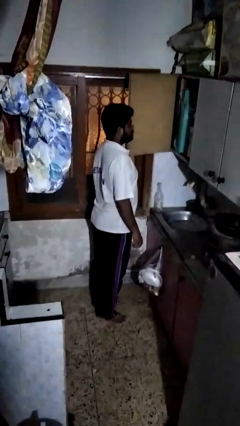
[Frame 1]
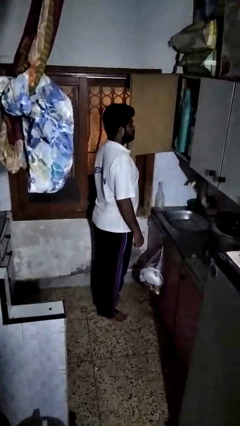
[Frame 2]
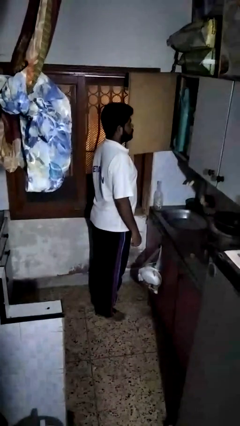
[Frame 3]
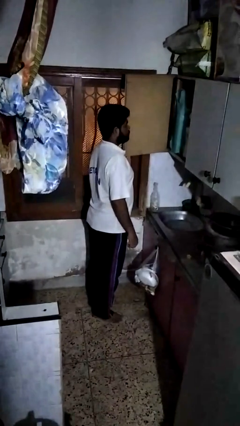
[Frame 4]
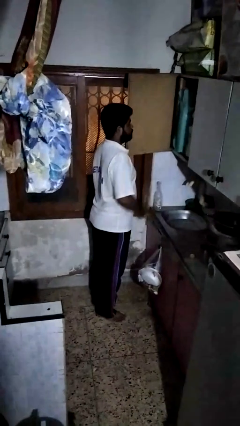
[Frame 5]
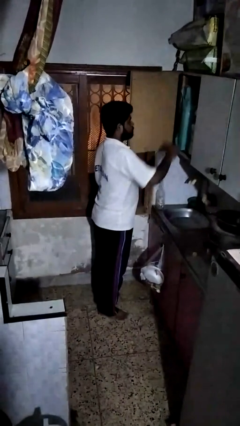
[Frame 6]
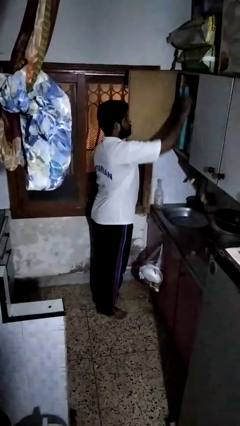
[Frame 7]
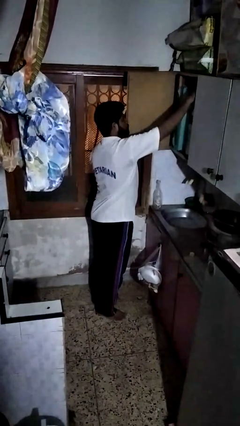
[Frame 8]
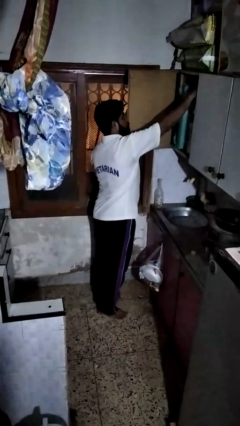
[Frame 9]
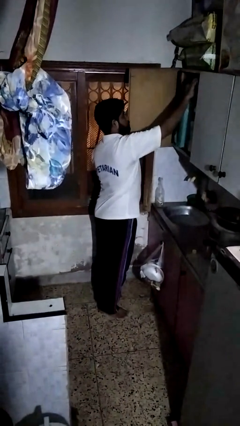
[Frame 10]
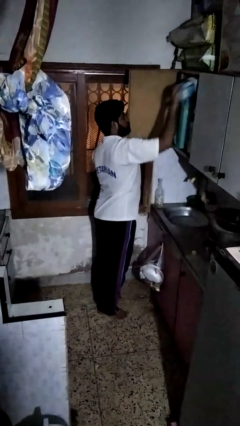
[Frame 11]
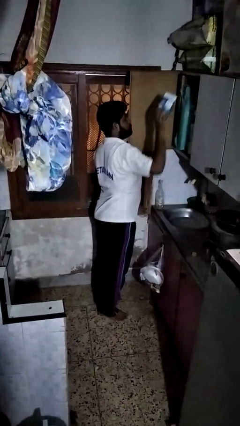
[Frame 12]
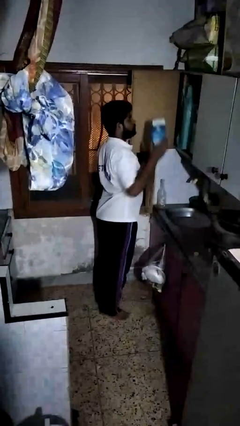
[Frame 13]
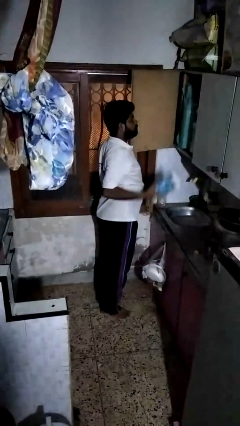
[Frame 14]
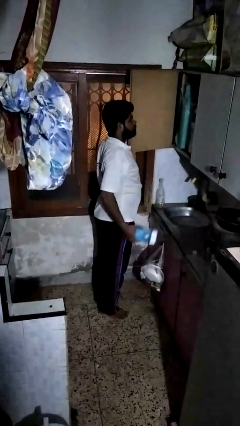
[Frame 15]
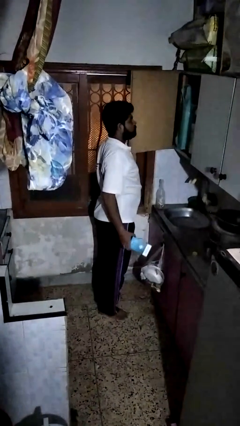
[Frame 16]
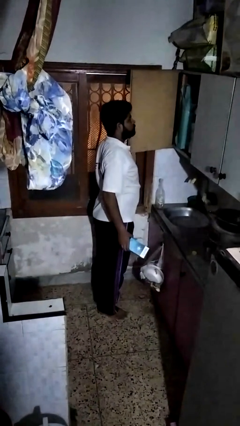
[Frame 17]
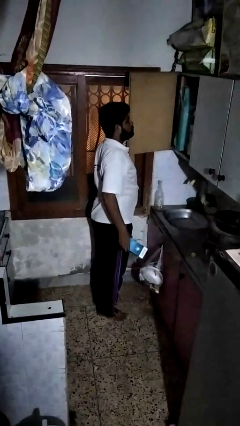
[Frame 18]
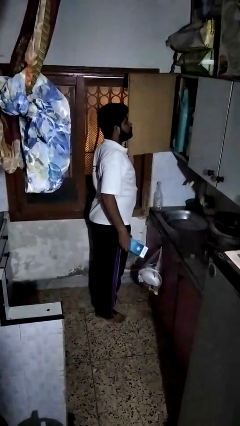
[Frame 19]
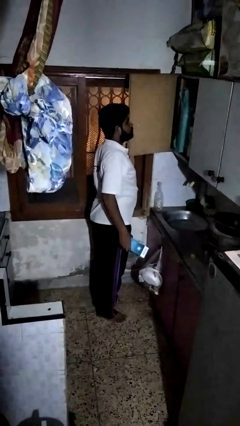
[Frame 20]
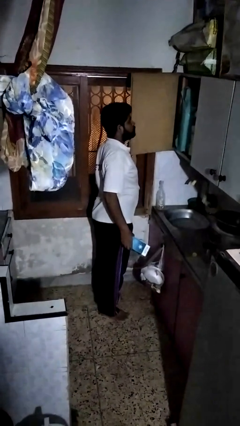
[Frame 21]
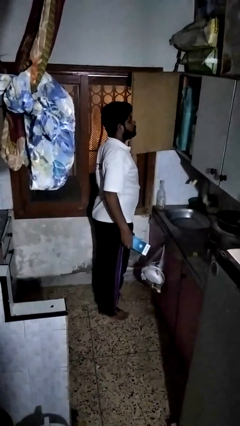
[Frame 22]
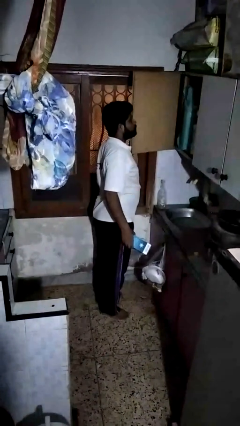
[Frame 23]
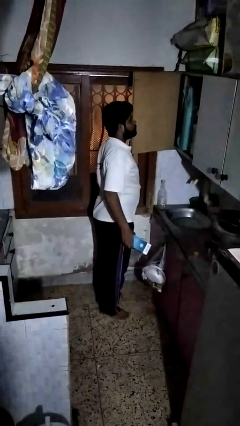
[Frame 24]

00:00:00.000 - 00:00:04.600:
person picks up object from cabinet

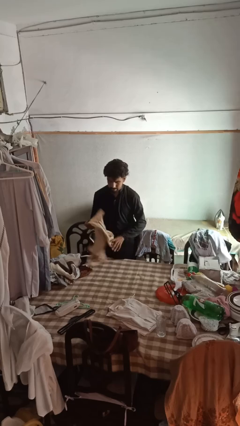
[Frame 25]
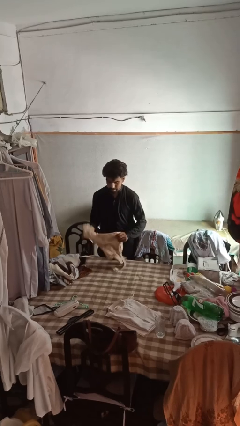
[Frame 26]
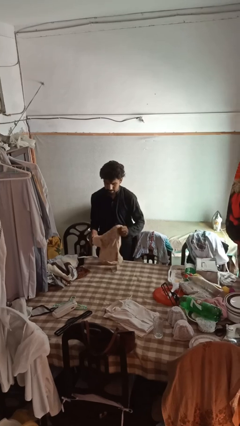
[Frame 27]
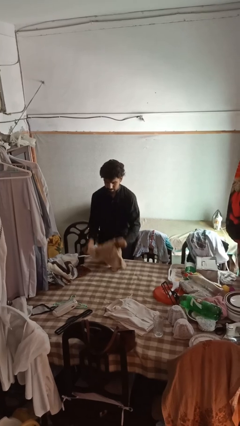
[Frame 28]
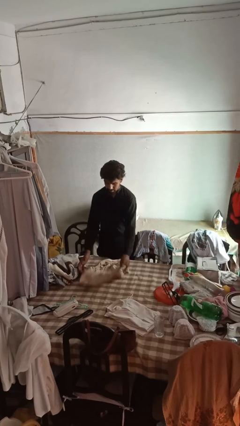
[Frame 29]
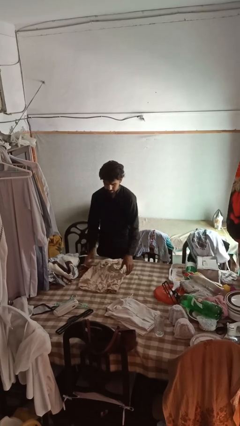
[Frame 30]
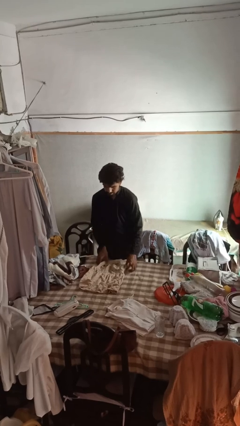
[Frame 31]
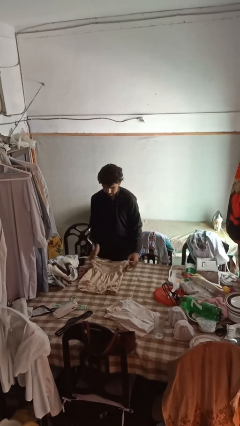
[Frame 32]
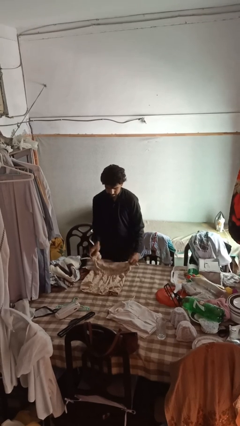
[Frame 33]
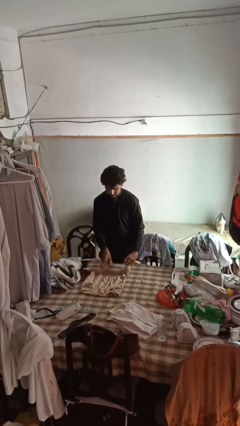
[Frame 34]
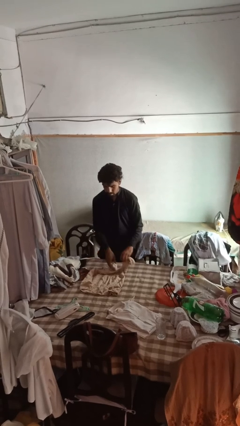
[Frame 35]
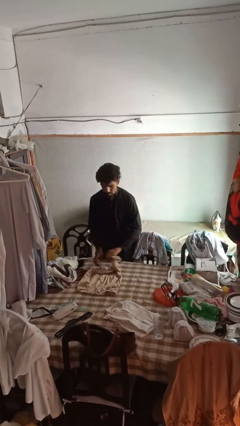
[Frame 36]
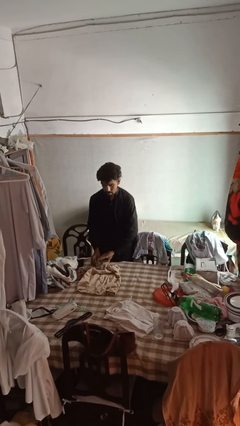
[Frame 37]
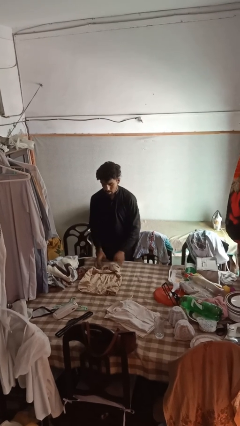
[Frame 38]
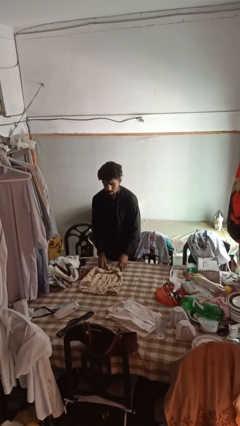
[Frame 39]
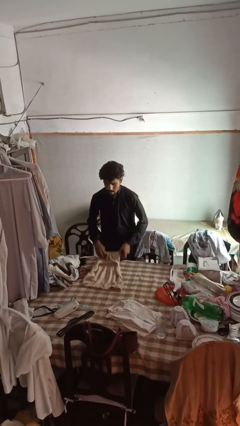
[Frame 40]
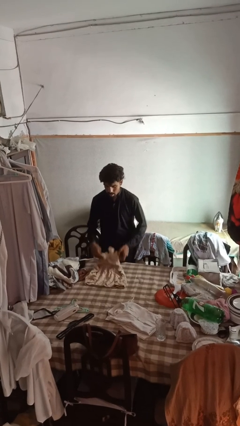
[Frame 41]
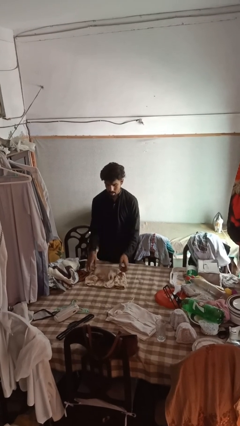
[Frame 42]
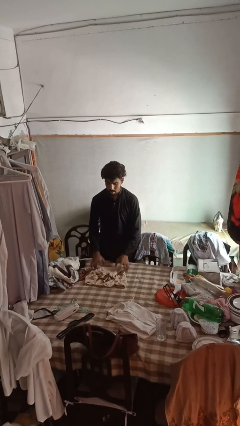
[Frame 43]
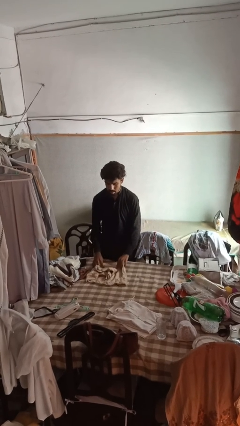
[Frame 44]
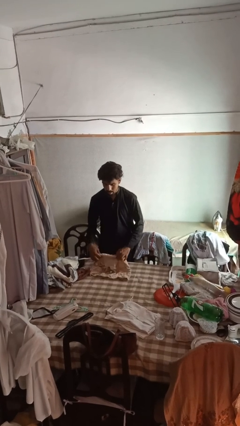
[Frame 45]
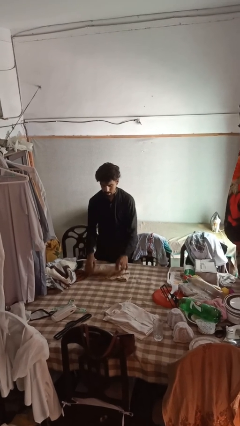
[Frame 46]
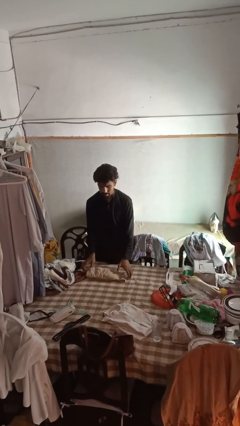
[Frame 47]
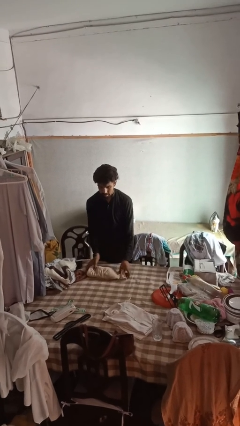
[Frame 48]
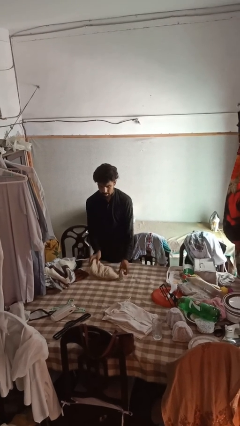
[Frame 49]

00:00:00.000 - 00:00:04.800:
person folds shirt

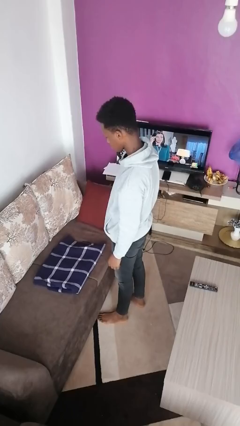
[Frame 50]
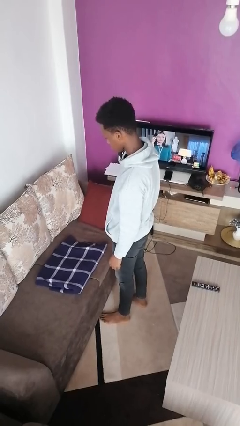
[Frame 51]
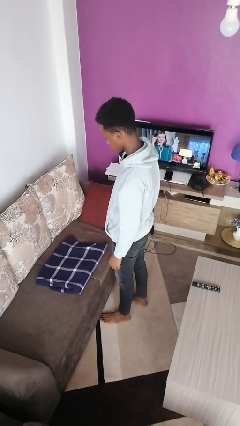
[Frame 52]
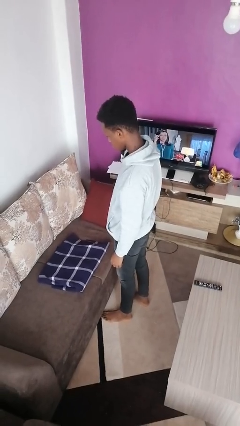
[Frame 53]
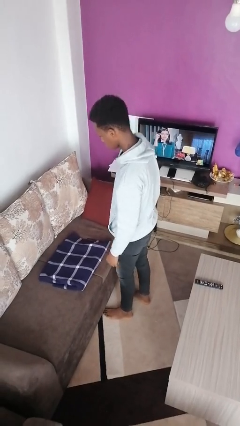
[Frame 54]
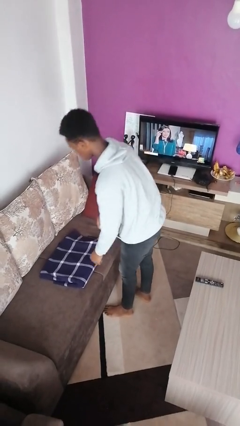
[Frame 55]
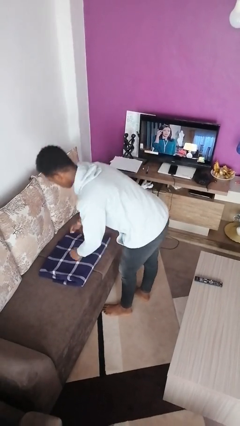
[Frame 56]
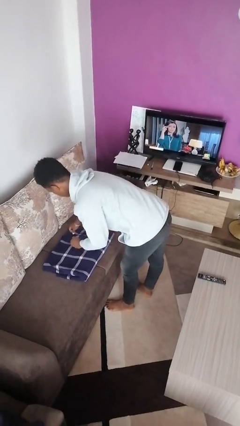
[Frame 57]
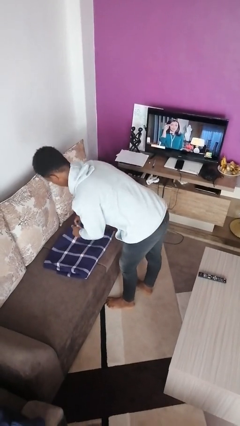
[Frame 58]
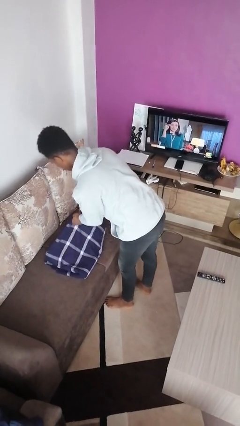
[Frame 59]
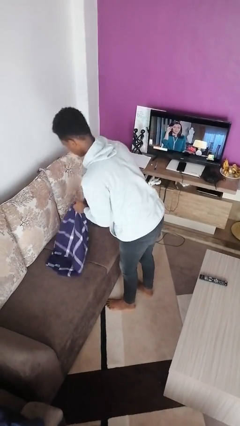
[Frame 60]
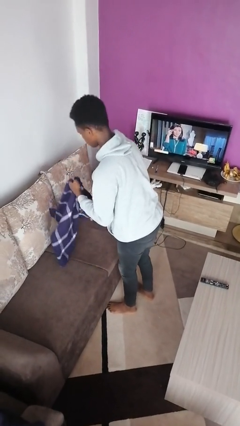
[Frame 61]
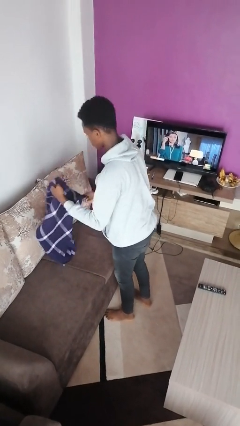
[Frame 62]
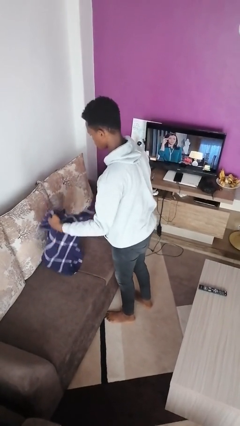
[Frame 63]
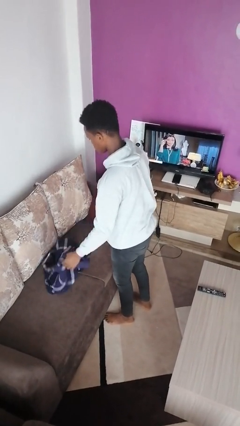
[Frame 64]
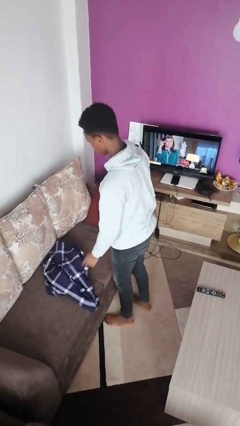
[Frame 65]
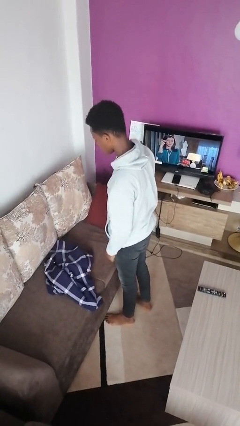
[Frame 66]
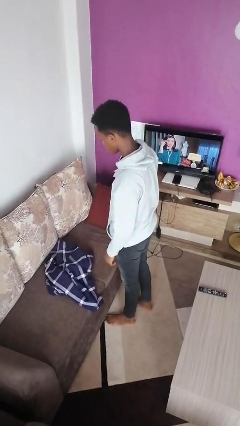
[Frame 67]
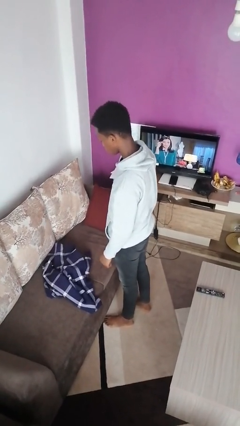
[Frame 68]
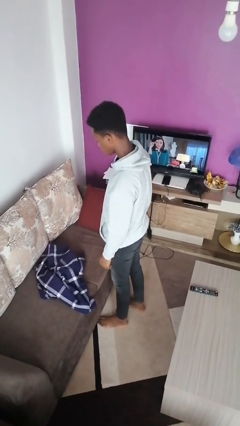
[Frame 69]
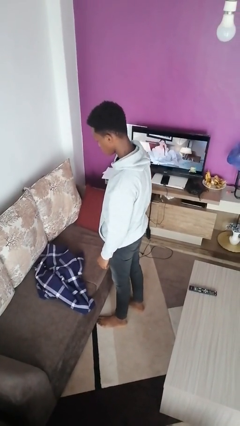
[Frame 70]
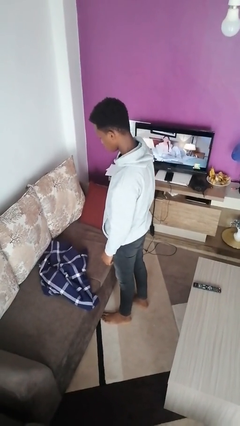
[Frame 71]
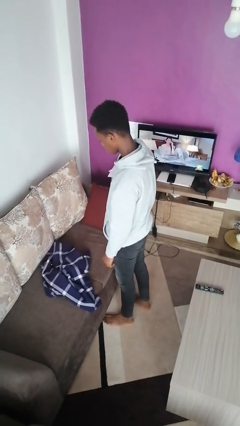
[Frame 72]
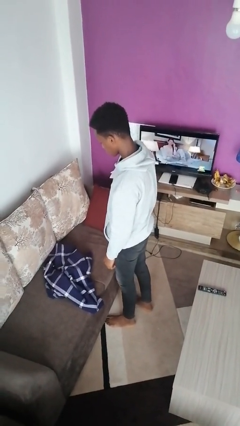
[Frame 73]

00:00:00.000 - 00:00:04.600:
person unfolds blanket

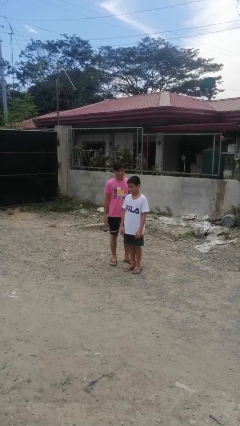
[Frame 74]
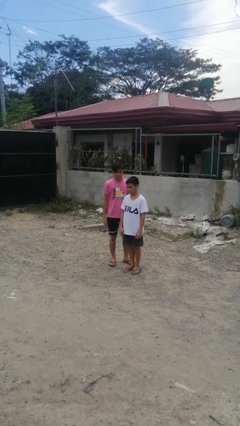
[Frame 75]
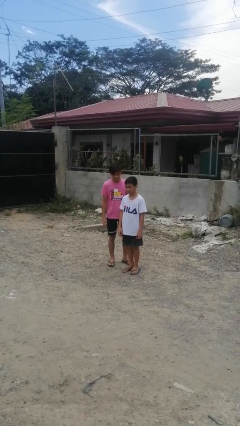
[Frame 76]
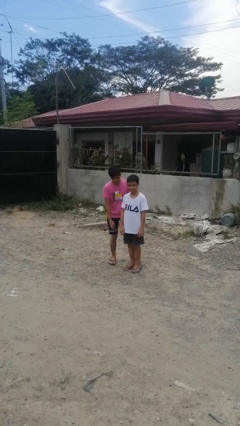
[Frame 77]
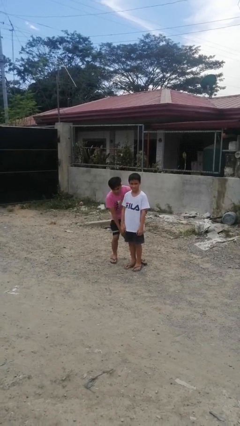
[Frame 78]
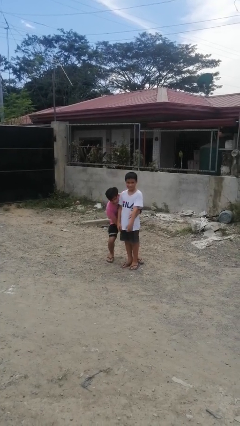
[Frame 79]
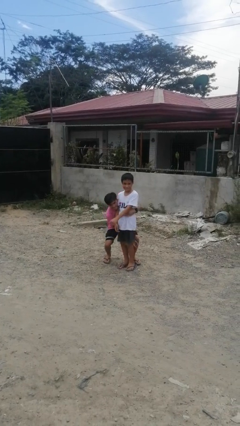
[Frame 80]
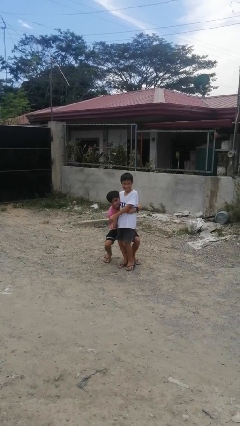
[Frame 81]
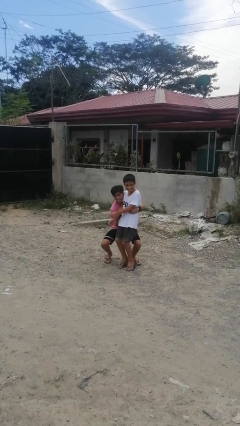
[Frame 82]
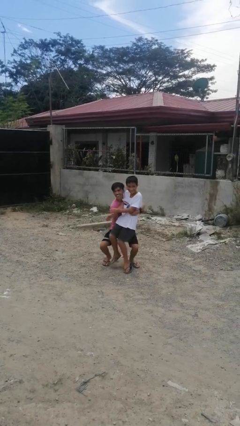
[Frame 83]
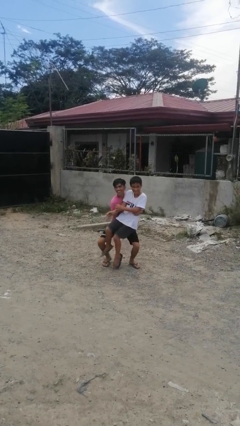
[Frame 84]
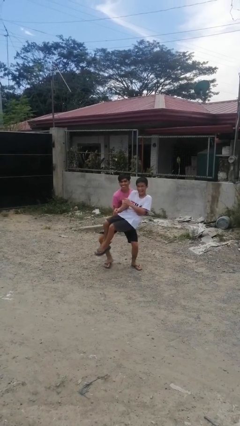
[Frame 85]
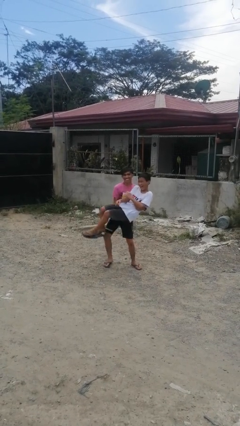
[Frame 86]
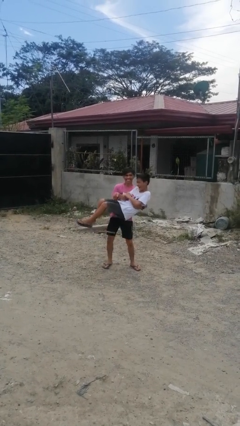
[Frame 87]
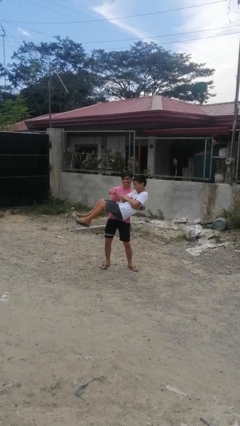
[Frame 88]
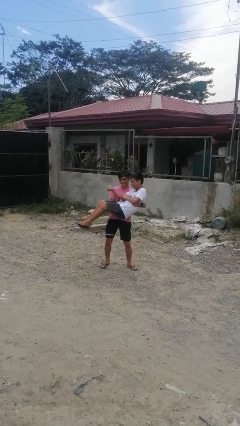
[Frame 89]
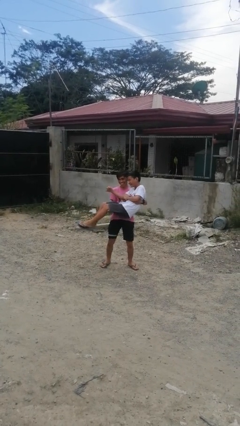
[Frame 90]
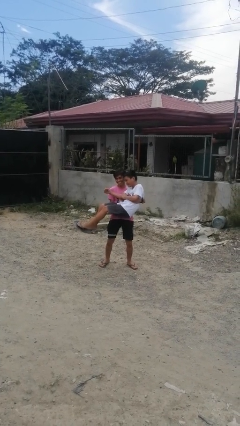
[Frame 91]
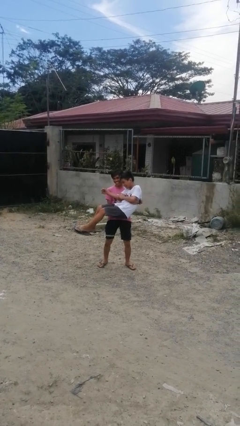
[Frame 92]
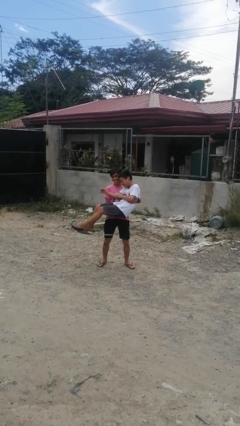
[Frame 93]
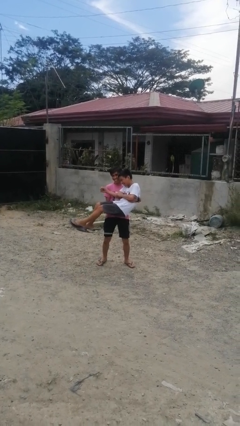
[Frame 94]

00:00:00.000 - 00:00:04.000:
person picks up person
